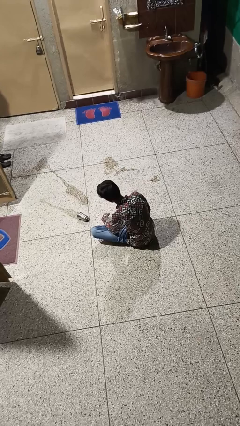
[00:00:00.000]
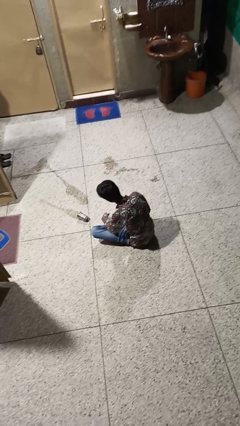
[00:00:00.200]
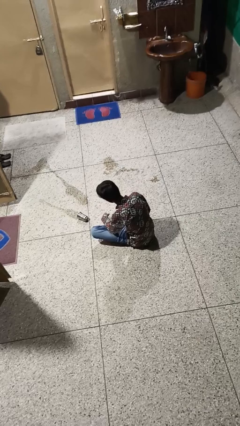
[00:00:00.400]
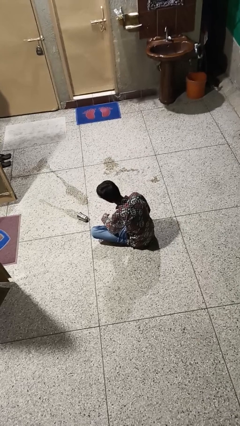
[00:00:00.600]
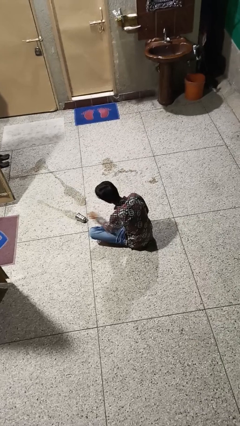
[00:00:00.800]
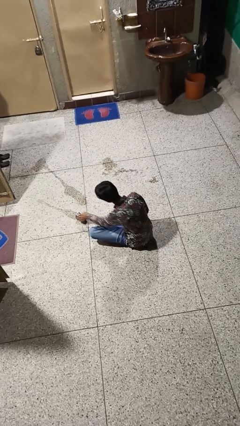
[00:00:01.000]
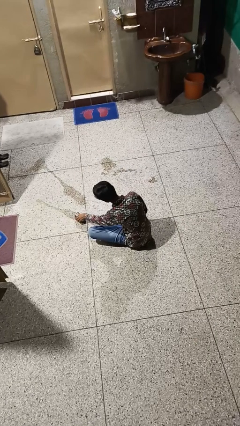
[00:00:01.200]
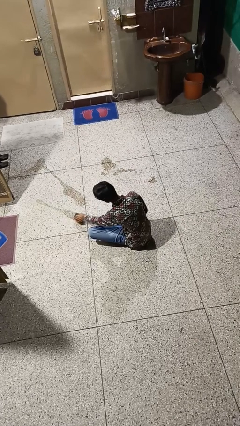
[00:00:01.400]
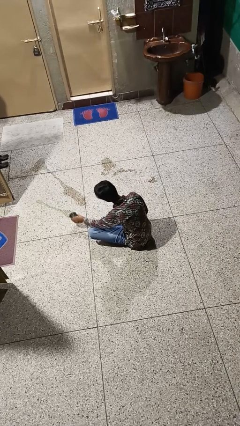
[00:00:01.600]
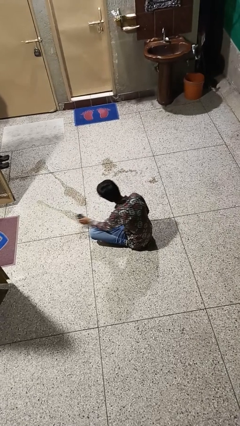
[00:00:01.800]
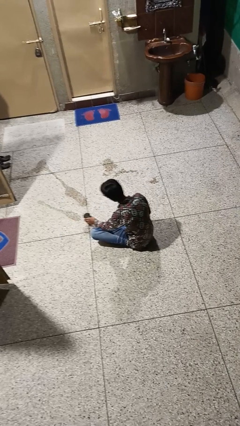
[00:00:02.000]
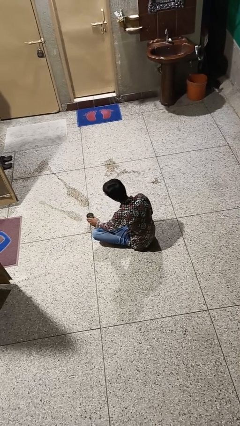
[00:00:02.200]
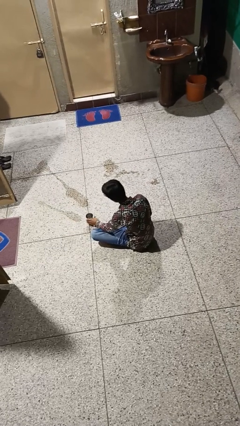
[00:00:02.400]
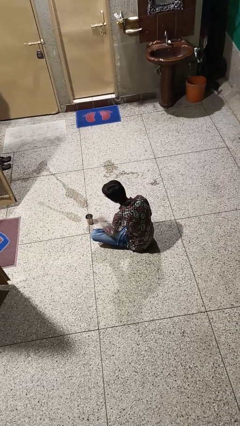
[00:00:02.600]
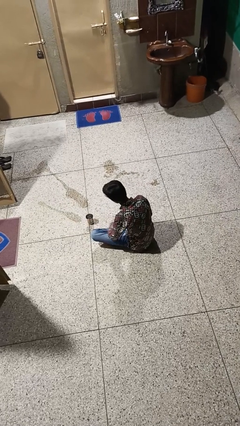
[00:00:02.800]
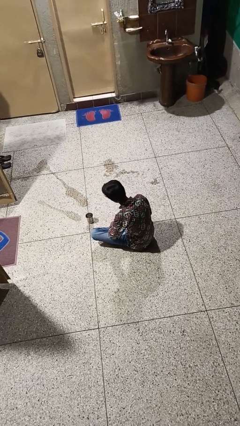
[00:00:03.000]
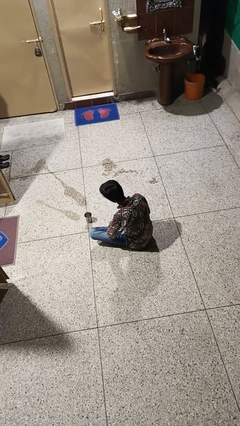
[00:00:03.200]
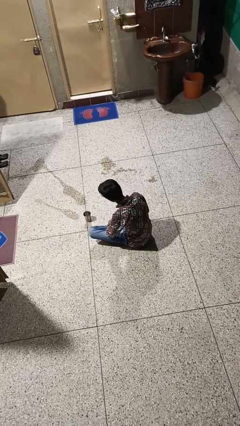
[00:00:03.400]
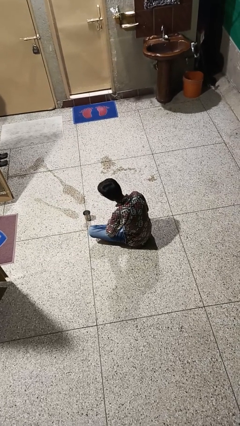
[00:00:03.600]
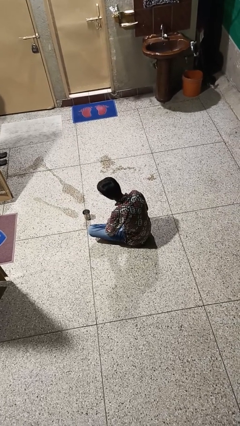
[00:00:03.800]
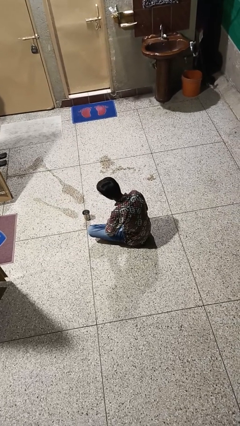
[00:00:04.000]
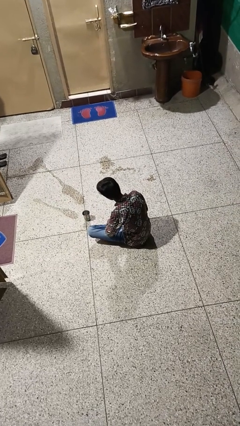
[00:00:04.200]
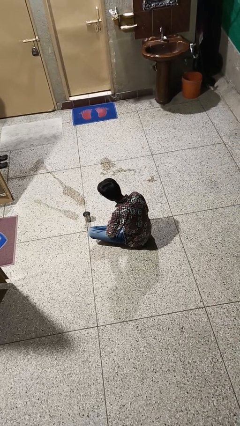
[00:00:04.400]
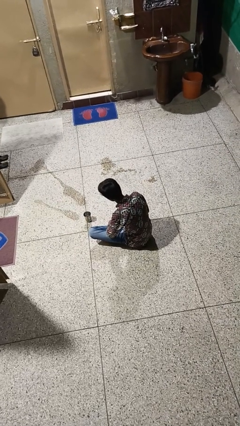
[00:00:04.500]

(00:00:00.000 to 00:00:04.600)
person sets upright glass

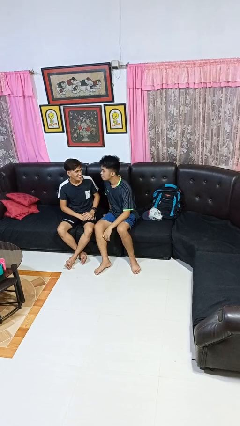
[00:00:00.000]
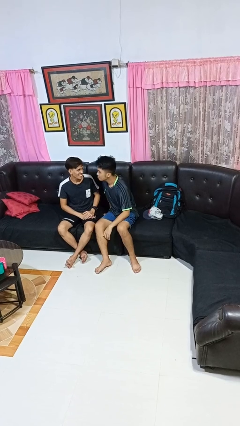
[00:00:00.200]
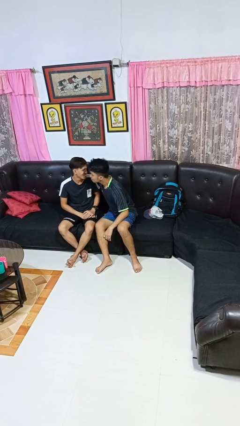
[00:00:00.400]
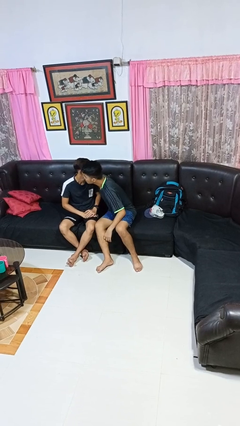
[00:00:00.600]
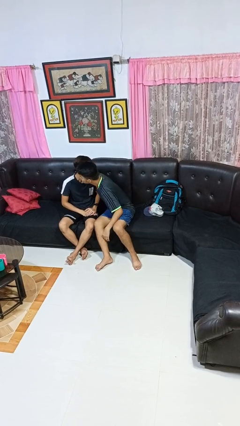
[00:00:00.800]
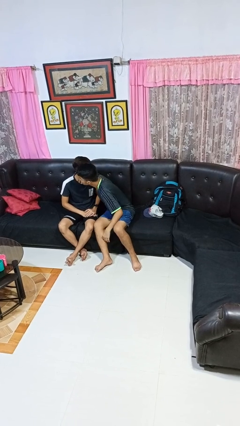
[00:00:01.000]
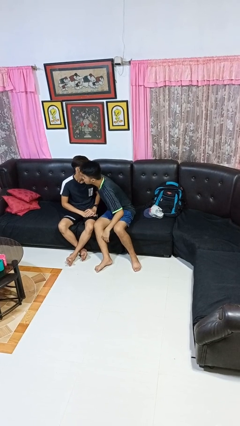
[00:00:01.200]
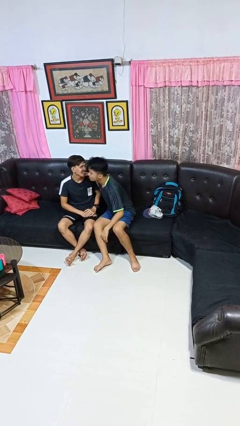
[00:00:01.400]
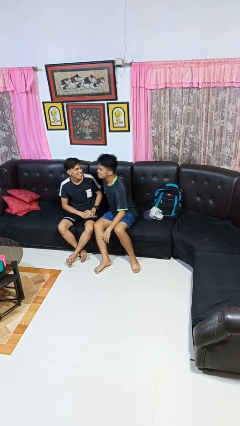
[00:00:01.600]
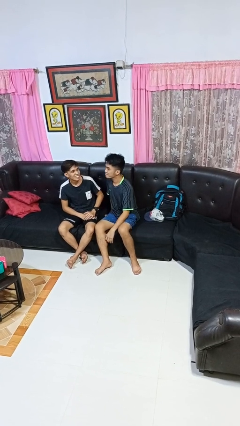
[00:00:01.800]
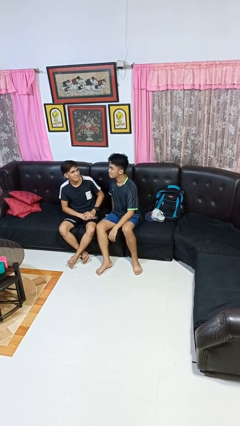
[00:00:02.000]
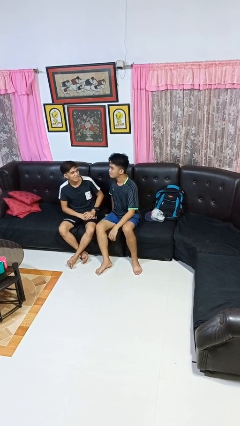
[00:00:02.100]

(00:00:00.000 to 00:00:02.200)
person kisses cheek of person

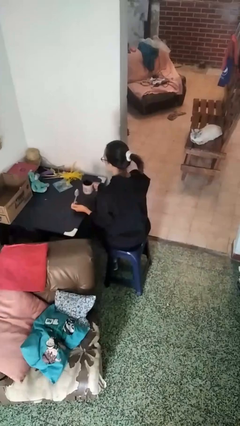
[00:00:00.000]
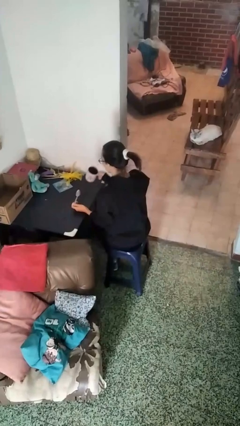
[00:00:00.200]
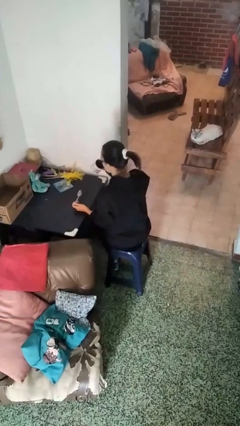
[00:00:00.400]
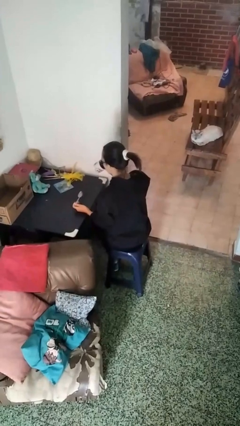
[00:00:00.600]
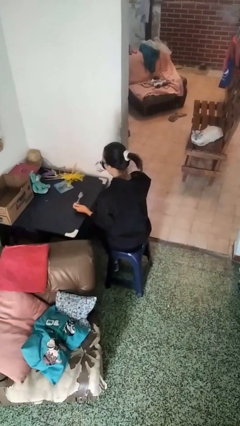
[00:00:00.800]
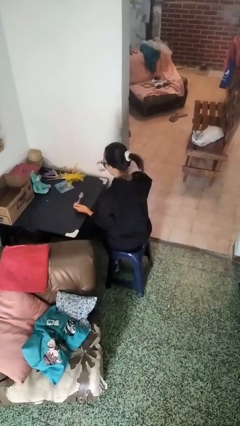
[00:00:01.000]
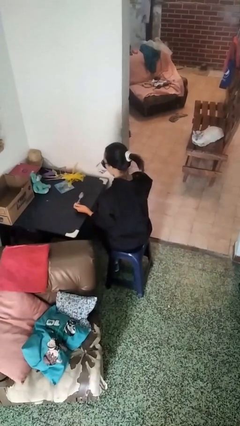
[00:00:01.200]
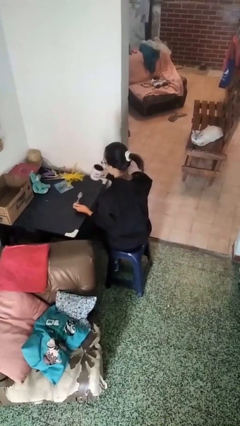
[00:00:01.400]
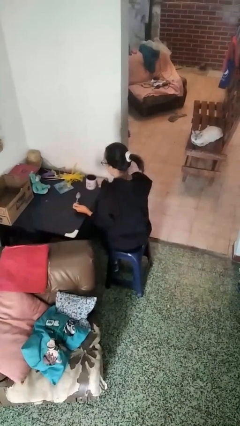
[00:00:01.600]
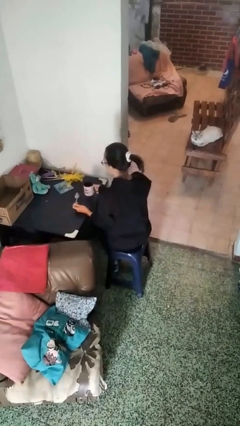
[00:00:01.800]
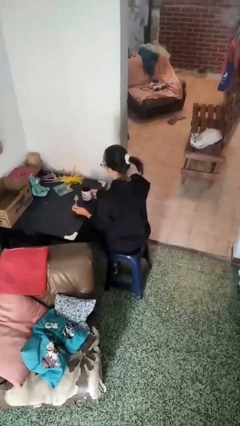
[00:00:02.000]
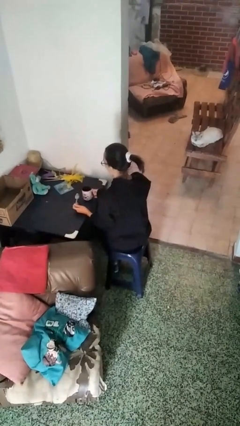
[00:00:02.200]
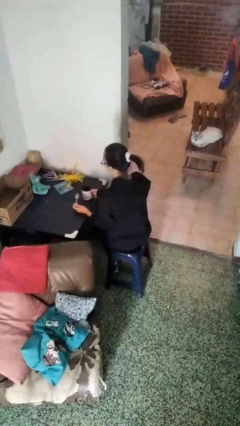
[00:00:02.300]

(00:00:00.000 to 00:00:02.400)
person drinks from mug

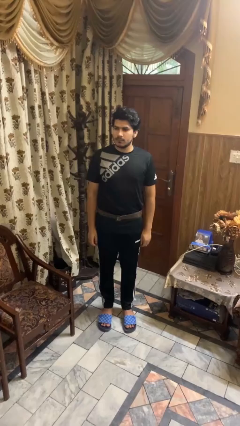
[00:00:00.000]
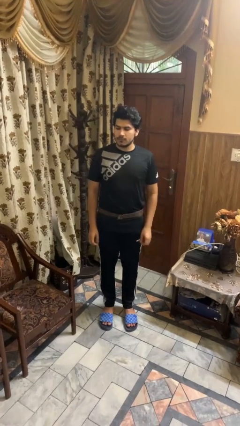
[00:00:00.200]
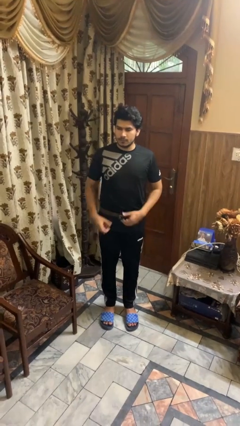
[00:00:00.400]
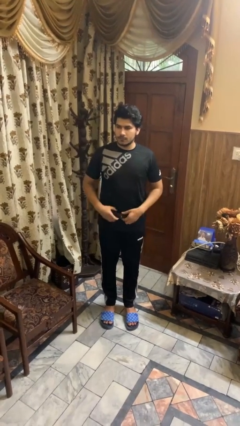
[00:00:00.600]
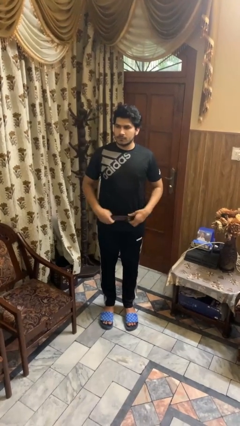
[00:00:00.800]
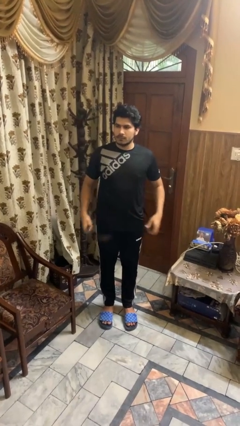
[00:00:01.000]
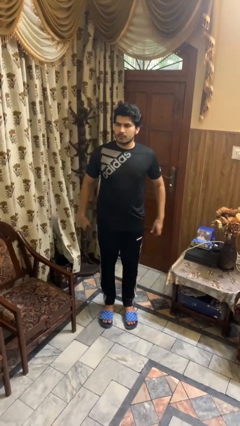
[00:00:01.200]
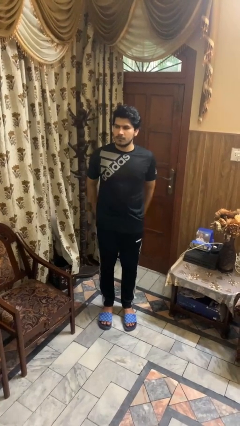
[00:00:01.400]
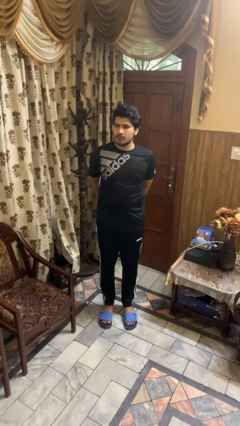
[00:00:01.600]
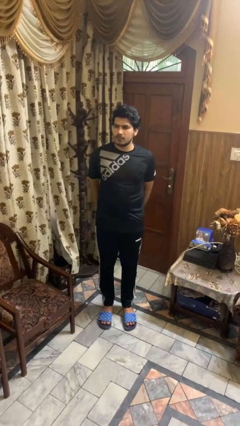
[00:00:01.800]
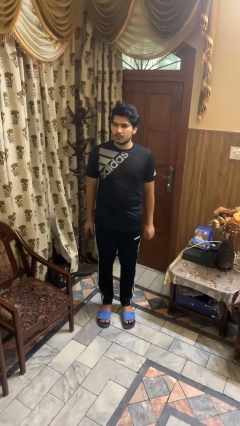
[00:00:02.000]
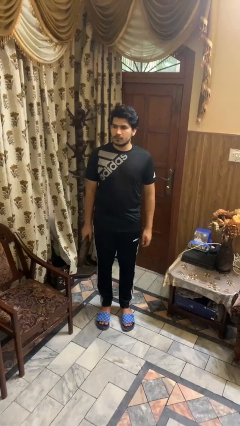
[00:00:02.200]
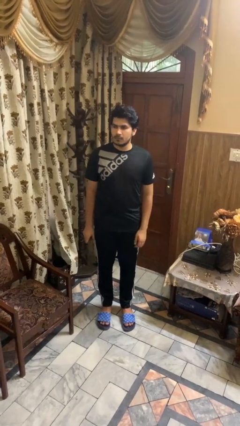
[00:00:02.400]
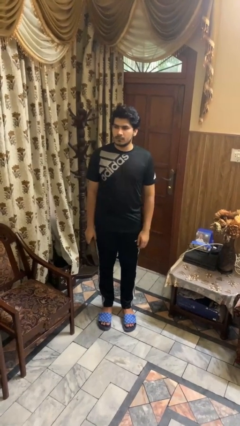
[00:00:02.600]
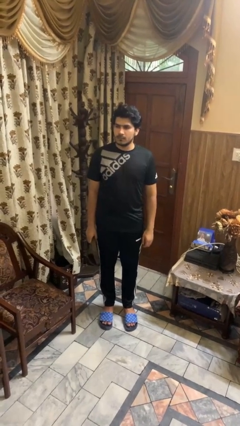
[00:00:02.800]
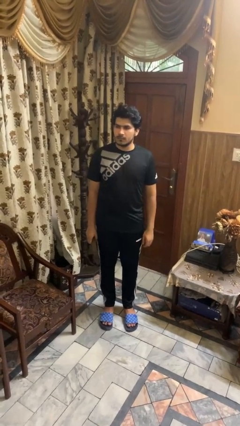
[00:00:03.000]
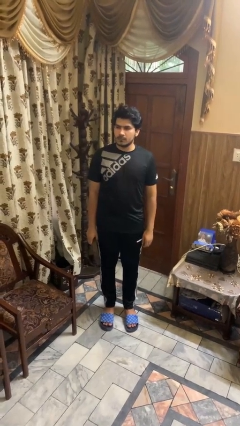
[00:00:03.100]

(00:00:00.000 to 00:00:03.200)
person takes off belt

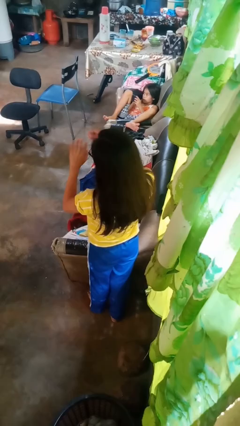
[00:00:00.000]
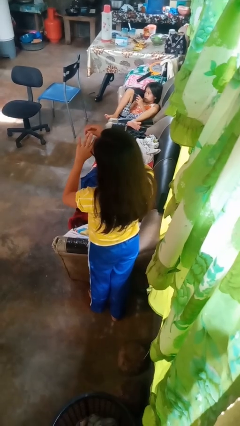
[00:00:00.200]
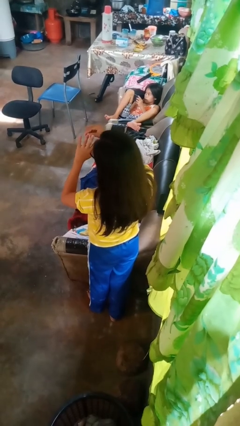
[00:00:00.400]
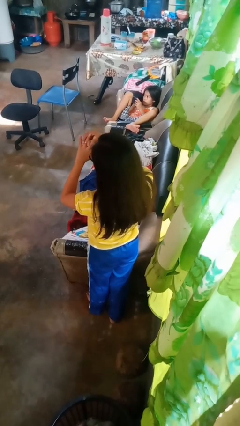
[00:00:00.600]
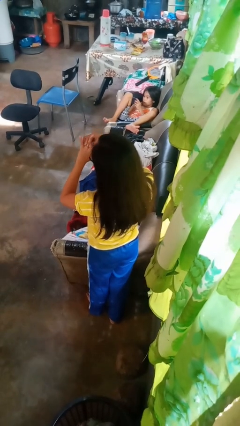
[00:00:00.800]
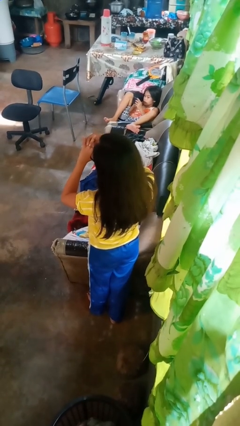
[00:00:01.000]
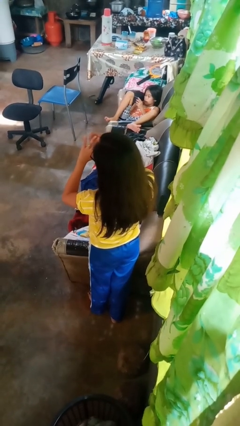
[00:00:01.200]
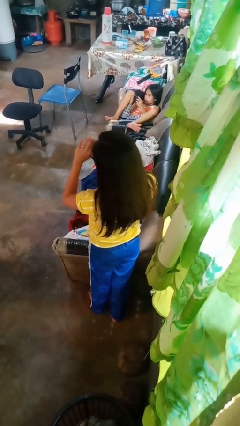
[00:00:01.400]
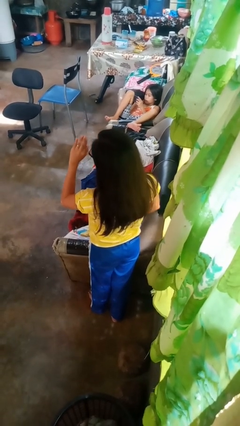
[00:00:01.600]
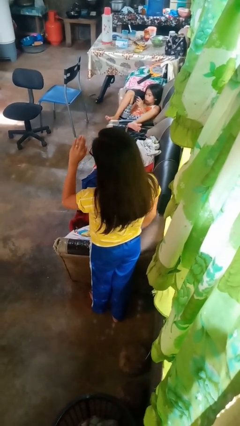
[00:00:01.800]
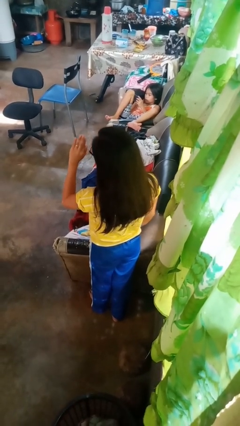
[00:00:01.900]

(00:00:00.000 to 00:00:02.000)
person puts on ring

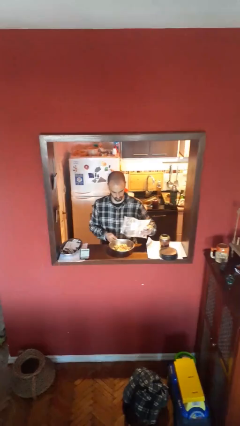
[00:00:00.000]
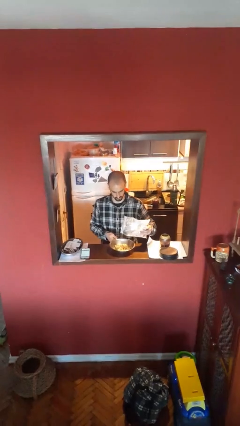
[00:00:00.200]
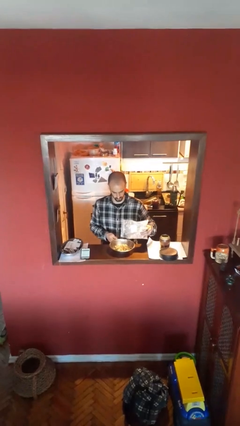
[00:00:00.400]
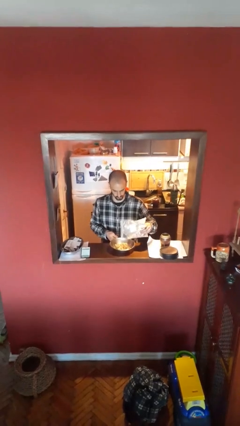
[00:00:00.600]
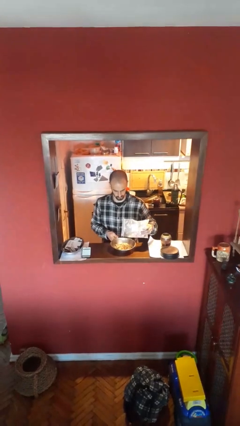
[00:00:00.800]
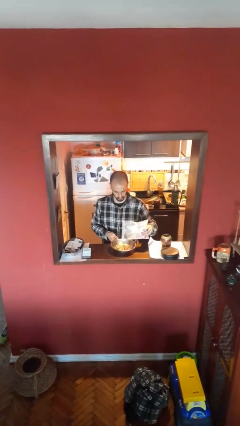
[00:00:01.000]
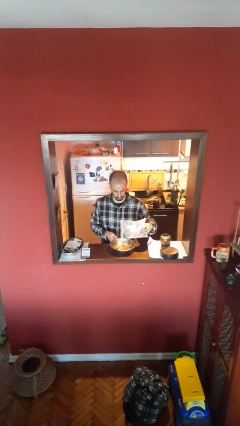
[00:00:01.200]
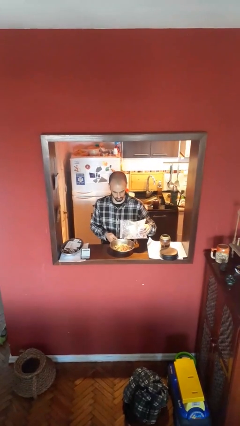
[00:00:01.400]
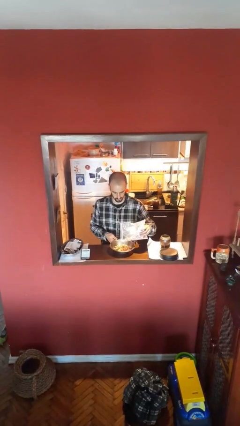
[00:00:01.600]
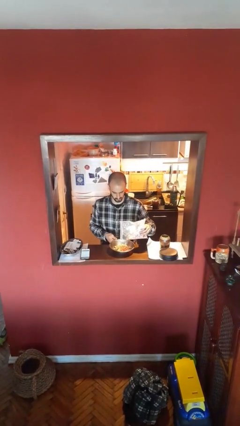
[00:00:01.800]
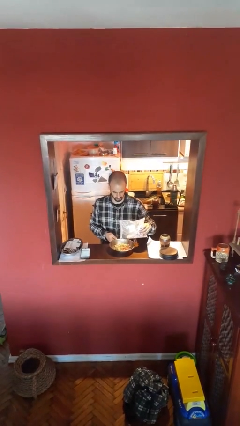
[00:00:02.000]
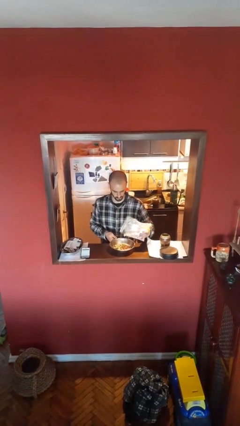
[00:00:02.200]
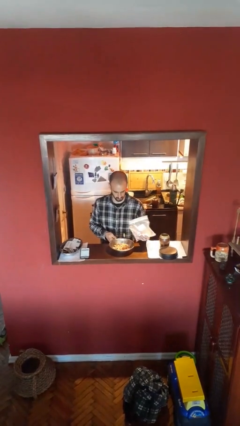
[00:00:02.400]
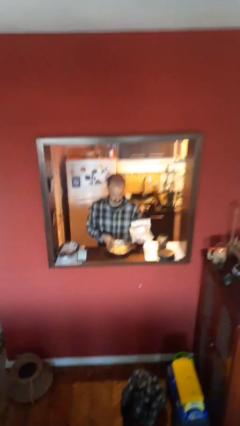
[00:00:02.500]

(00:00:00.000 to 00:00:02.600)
person pours into bowl

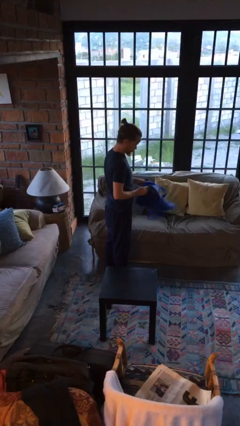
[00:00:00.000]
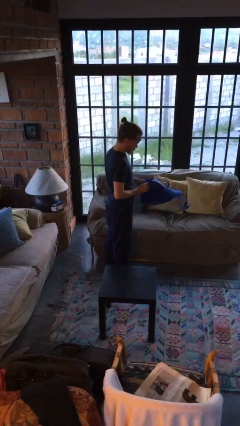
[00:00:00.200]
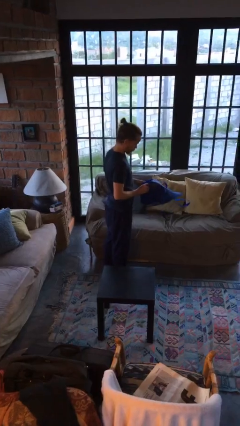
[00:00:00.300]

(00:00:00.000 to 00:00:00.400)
person puts down object on couch
